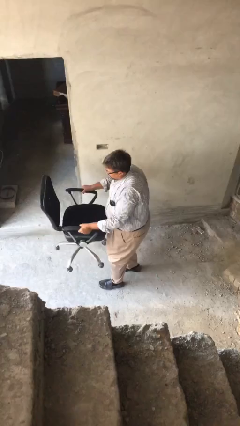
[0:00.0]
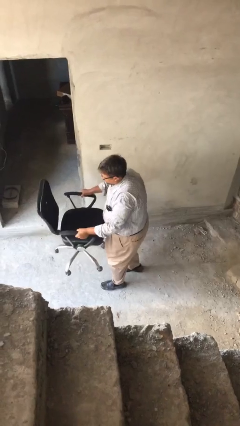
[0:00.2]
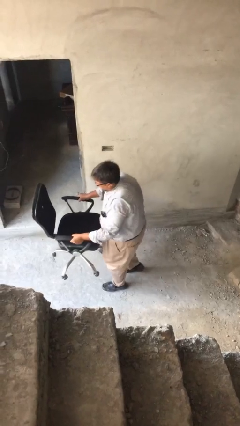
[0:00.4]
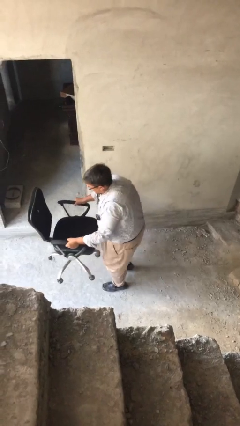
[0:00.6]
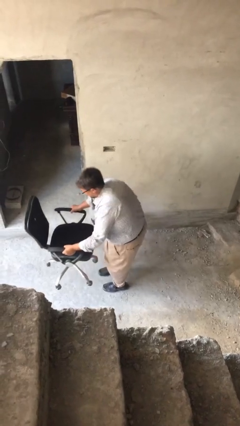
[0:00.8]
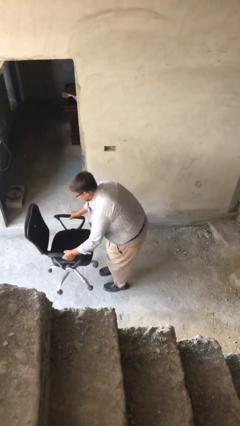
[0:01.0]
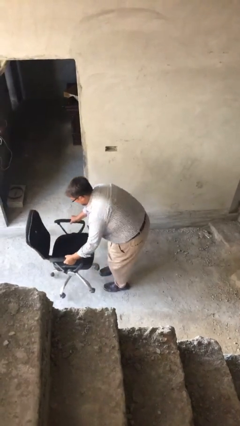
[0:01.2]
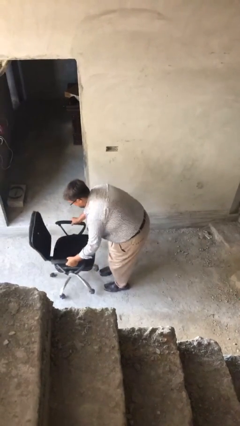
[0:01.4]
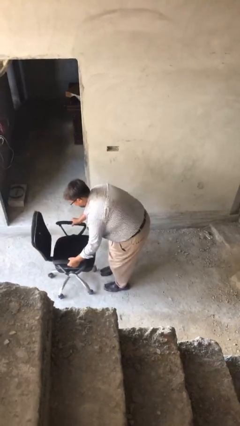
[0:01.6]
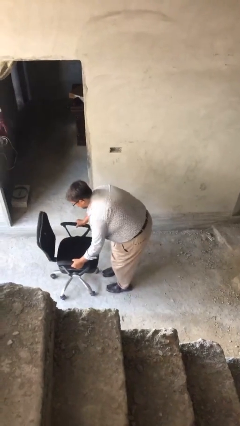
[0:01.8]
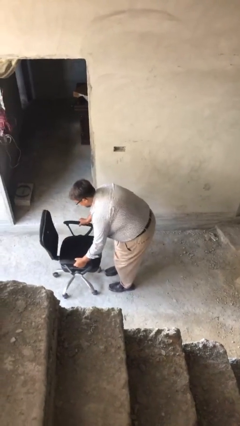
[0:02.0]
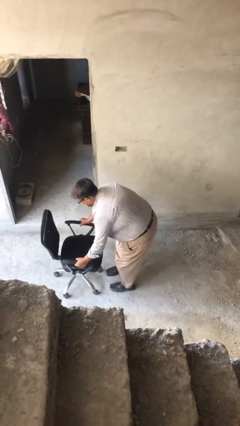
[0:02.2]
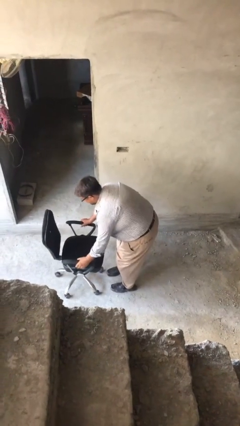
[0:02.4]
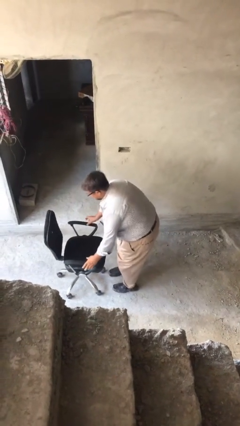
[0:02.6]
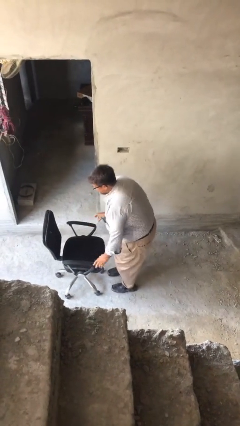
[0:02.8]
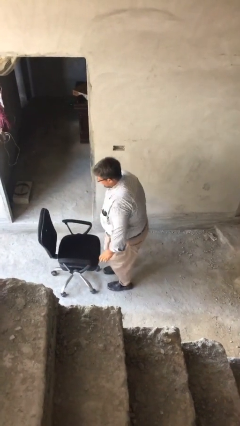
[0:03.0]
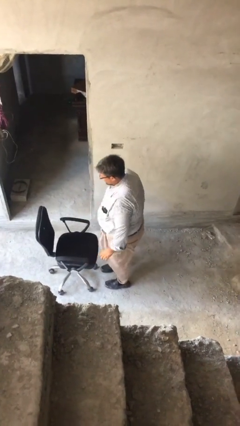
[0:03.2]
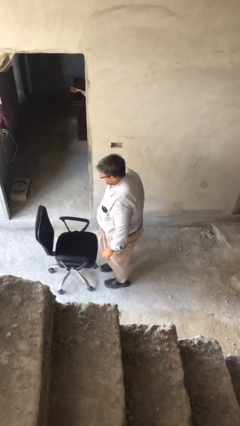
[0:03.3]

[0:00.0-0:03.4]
person puts down object on floor

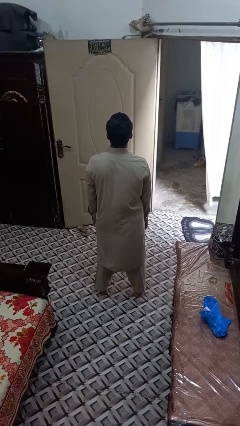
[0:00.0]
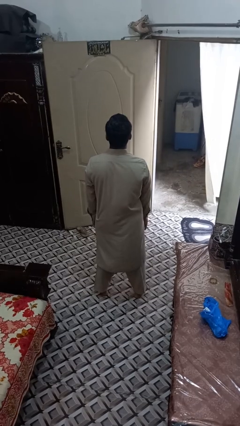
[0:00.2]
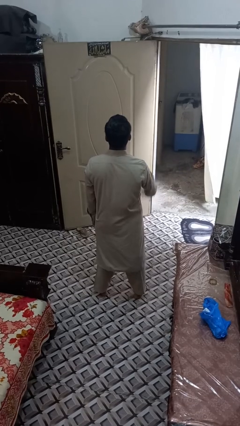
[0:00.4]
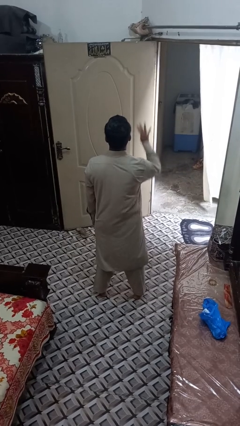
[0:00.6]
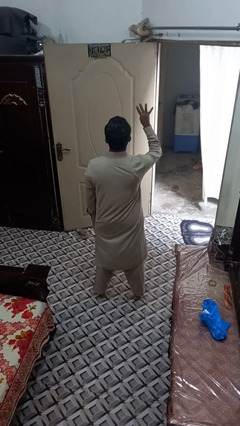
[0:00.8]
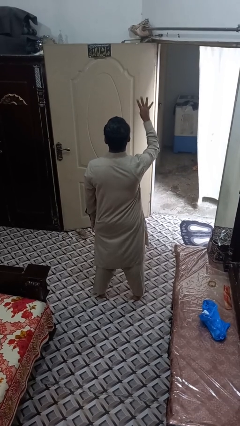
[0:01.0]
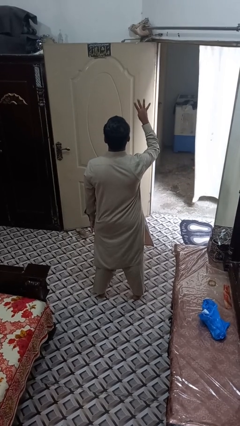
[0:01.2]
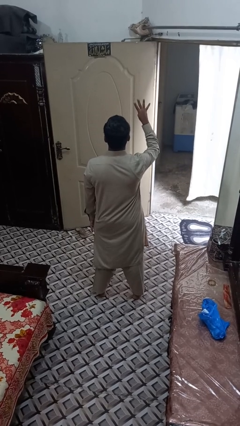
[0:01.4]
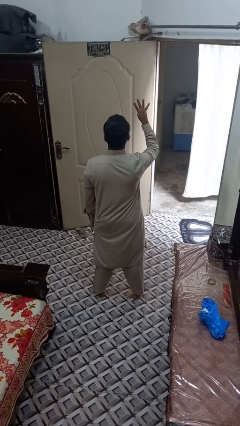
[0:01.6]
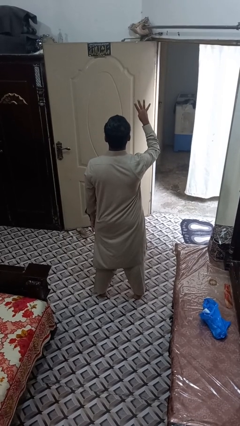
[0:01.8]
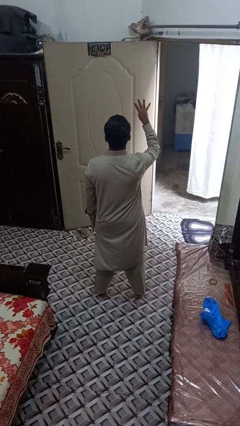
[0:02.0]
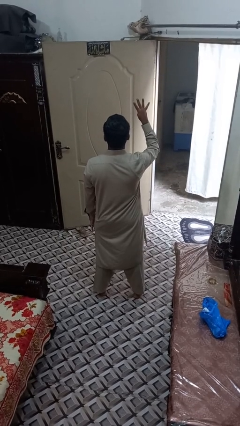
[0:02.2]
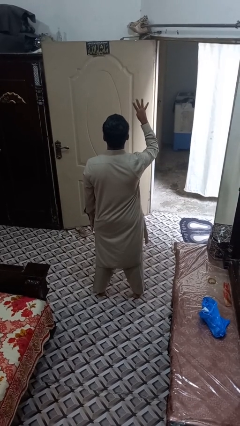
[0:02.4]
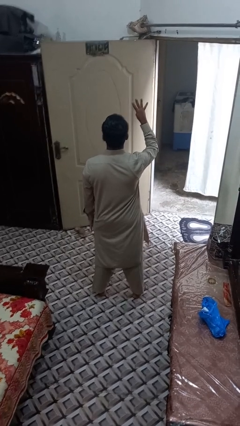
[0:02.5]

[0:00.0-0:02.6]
person gestures number four

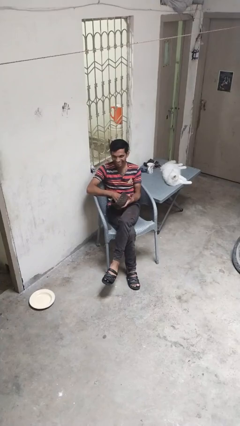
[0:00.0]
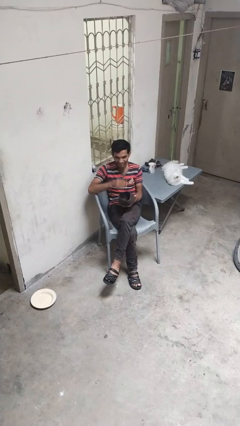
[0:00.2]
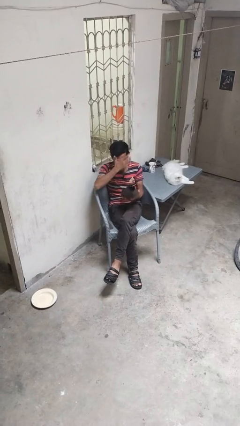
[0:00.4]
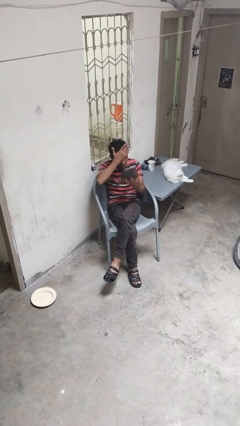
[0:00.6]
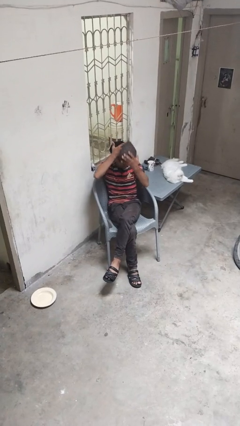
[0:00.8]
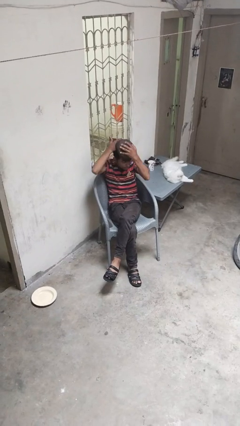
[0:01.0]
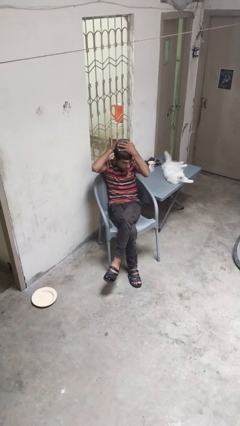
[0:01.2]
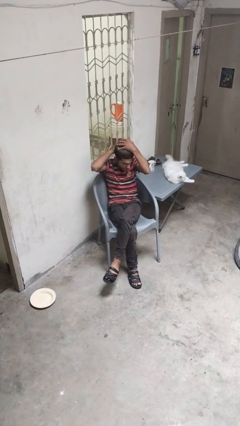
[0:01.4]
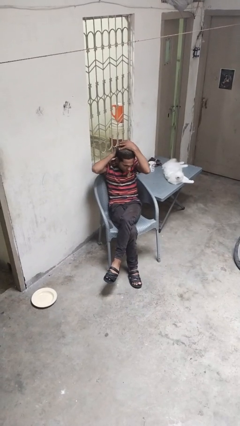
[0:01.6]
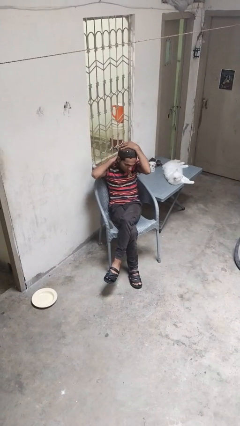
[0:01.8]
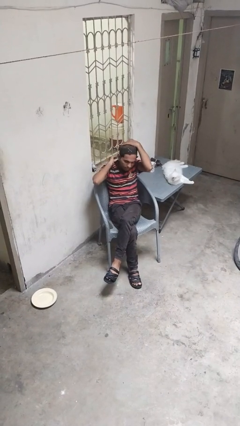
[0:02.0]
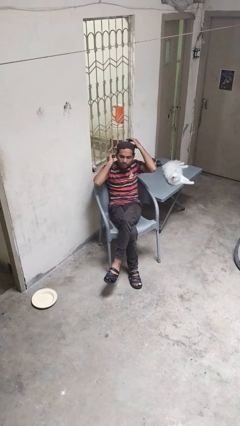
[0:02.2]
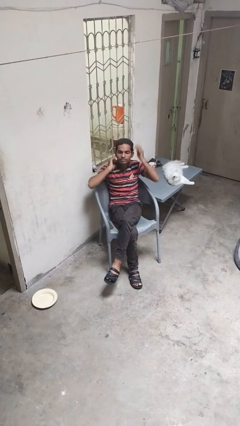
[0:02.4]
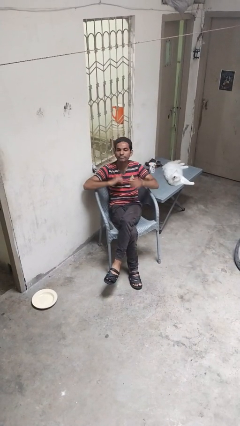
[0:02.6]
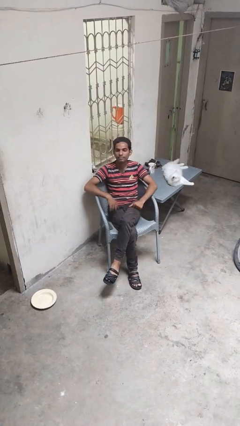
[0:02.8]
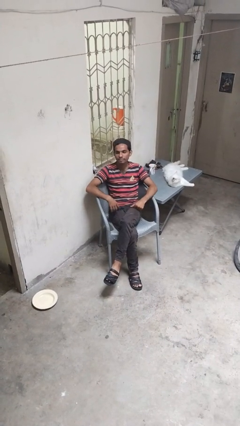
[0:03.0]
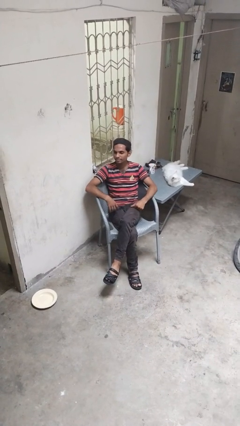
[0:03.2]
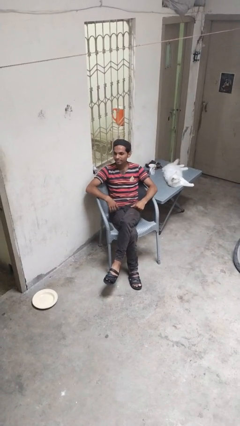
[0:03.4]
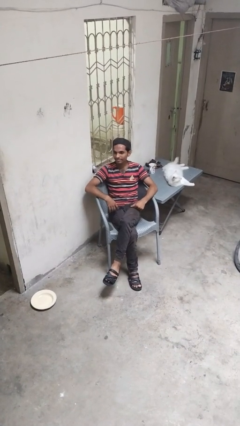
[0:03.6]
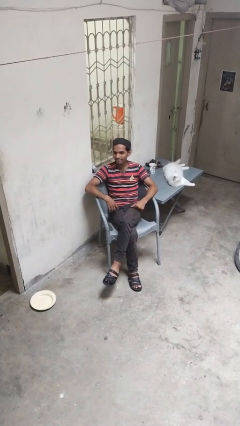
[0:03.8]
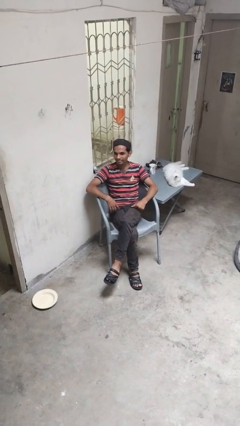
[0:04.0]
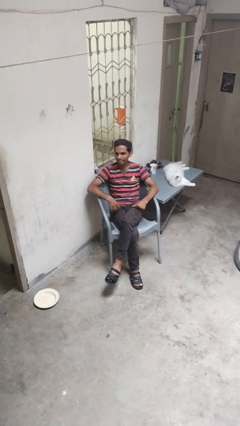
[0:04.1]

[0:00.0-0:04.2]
person puts on hat

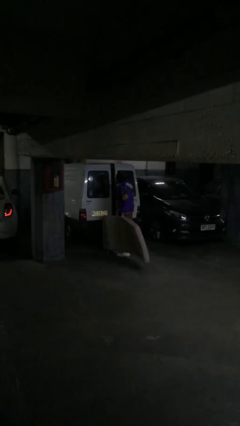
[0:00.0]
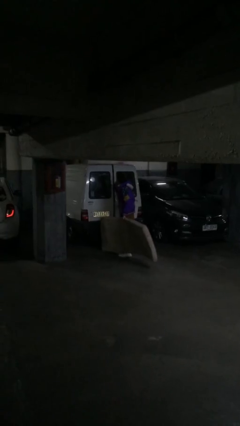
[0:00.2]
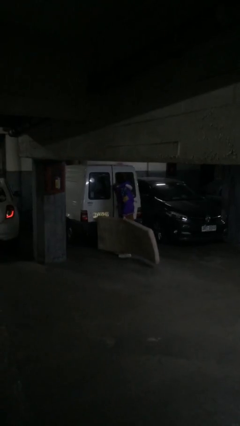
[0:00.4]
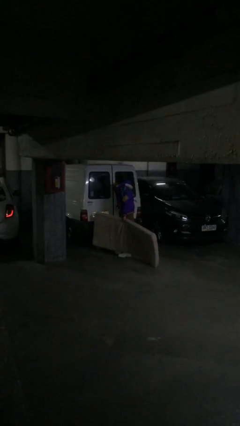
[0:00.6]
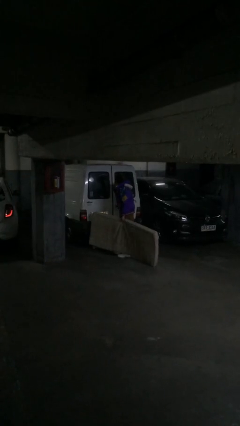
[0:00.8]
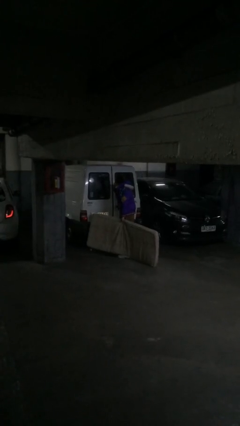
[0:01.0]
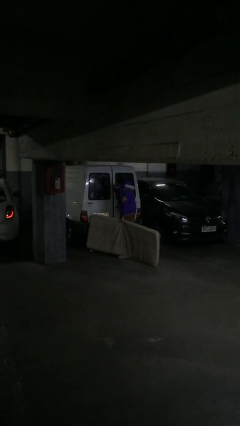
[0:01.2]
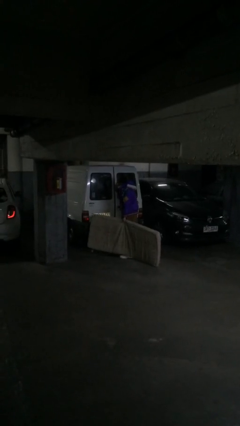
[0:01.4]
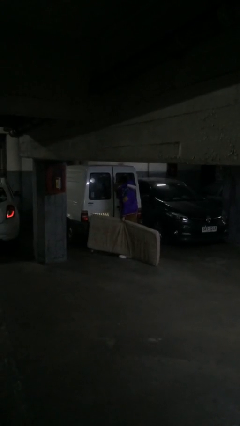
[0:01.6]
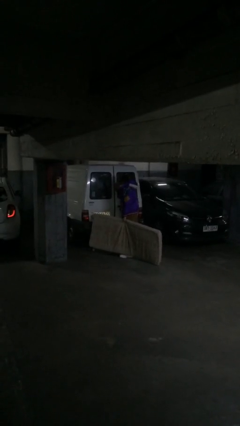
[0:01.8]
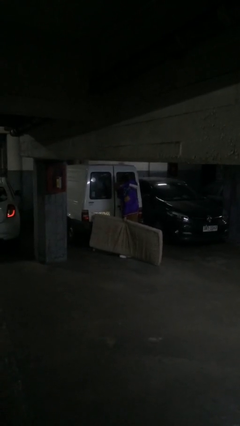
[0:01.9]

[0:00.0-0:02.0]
person closes car door

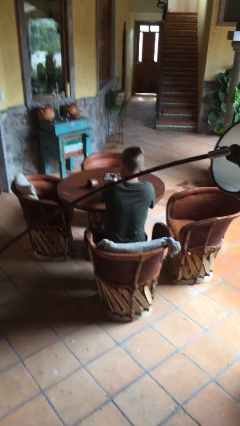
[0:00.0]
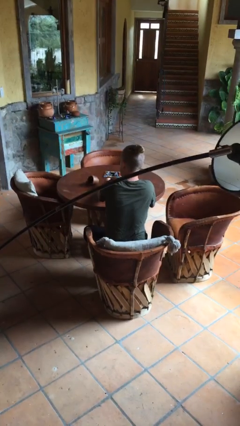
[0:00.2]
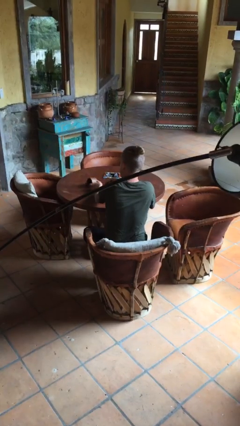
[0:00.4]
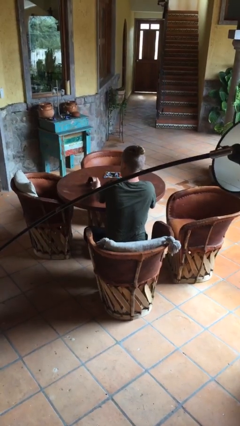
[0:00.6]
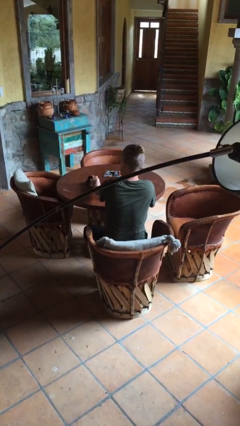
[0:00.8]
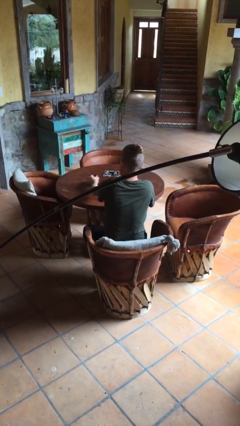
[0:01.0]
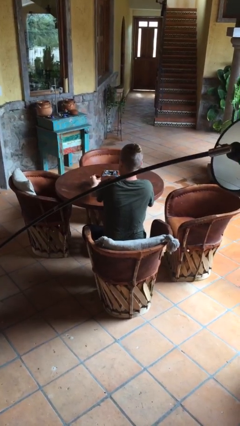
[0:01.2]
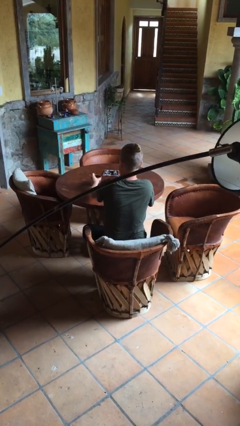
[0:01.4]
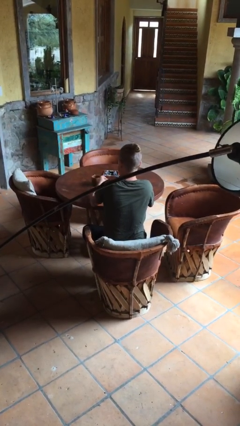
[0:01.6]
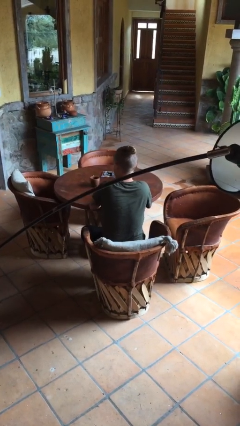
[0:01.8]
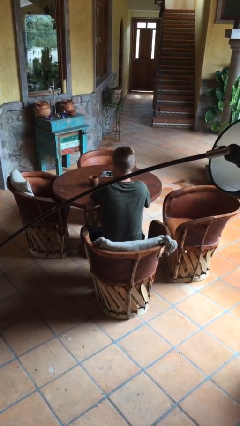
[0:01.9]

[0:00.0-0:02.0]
person sets upright glass

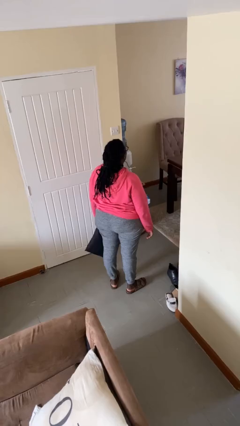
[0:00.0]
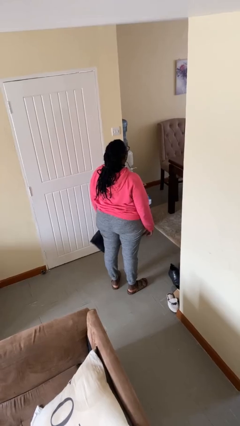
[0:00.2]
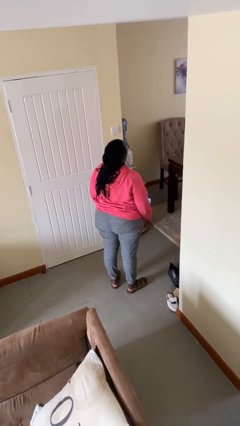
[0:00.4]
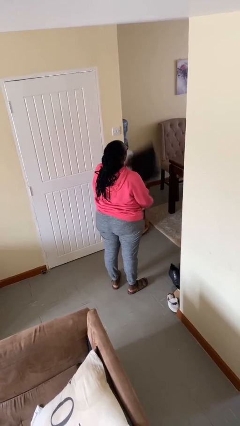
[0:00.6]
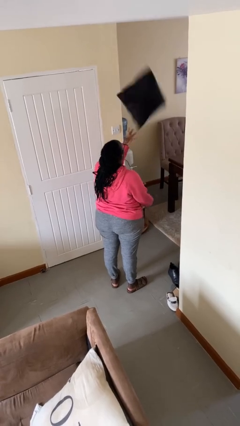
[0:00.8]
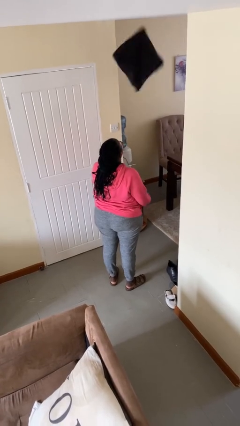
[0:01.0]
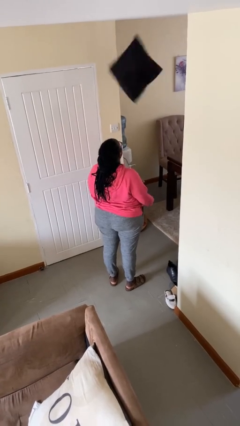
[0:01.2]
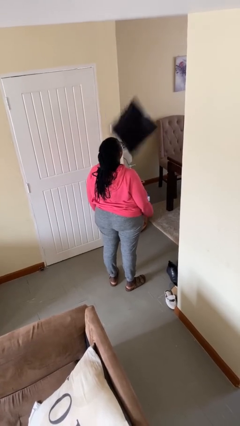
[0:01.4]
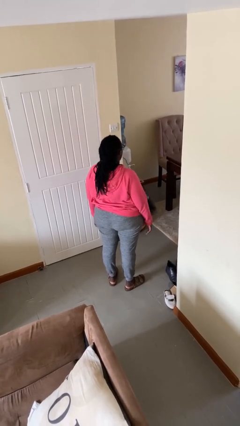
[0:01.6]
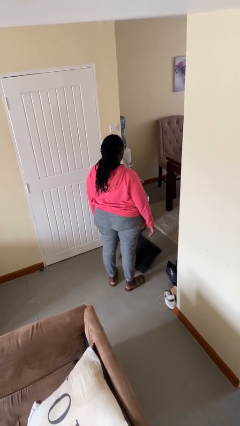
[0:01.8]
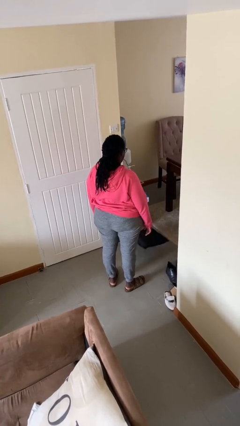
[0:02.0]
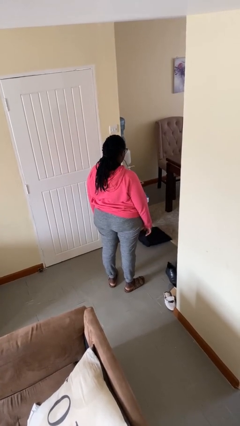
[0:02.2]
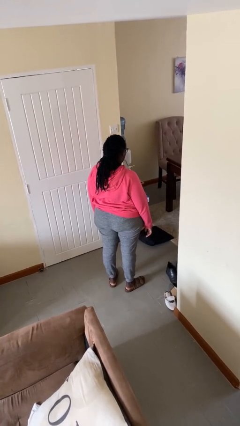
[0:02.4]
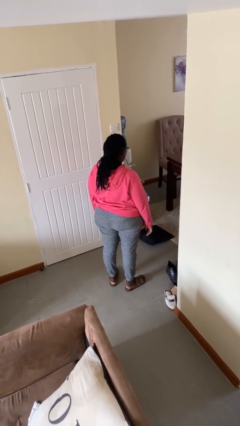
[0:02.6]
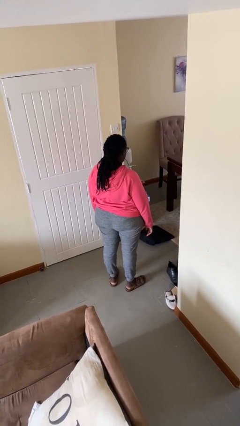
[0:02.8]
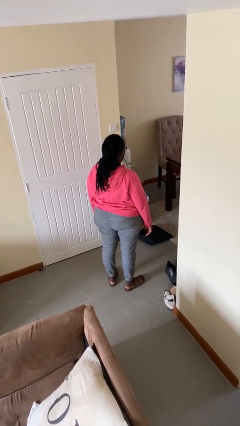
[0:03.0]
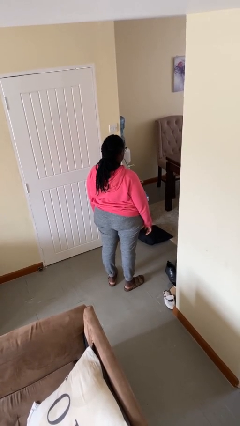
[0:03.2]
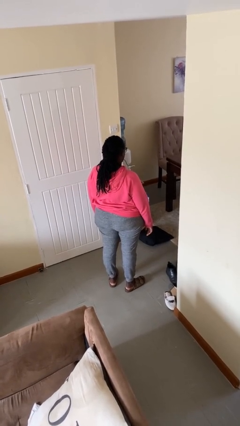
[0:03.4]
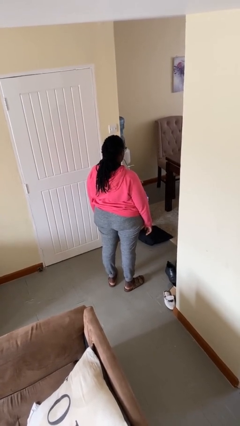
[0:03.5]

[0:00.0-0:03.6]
person throws object into air
